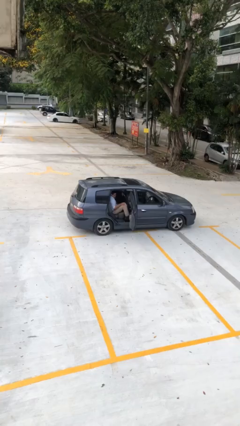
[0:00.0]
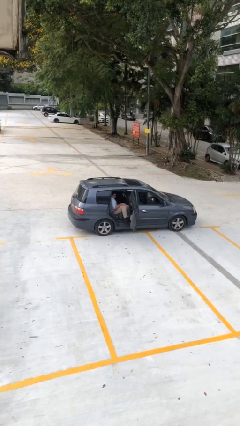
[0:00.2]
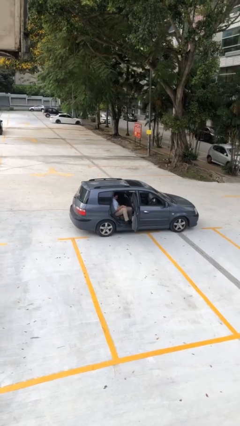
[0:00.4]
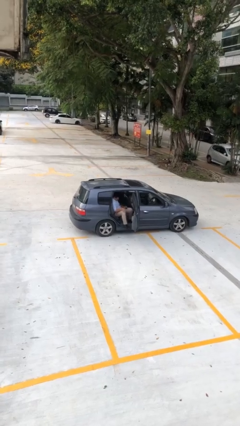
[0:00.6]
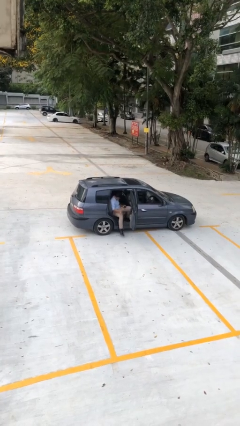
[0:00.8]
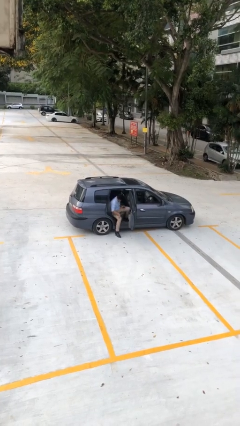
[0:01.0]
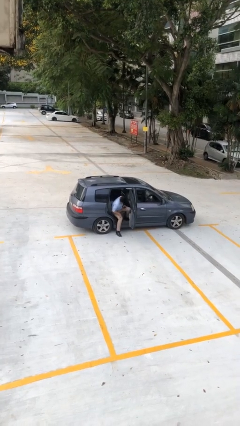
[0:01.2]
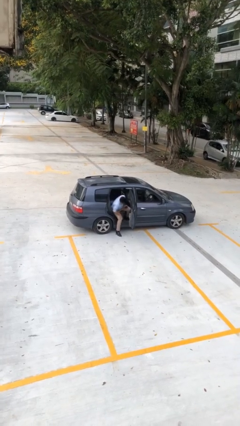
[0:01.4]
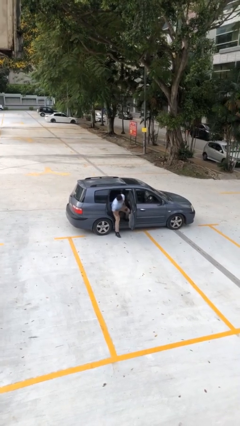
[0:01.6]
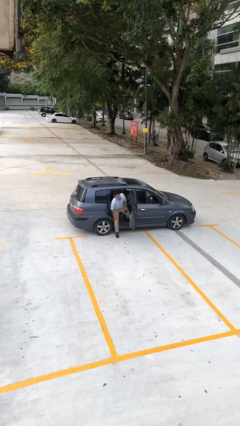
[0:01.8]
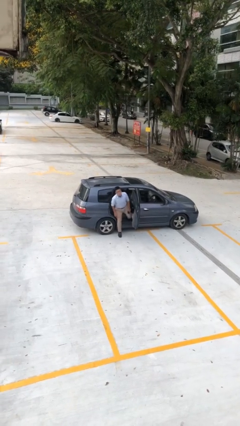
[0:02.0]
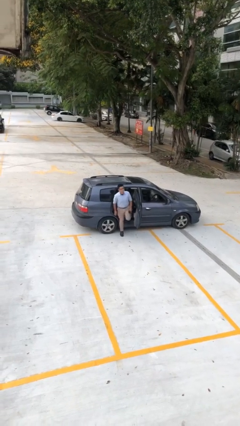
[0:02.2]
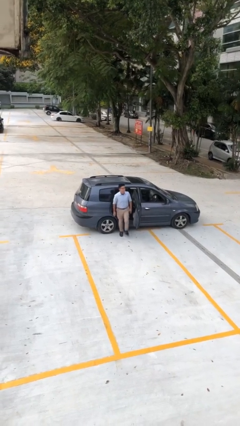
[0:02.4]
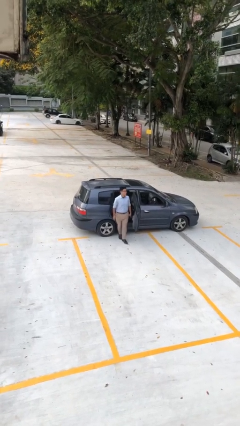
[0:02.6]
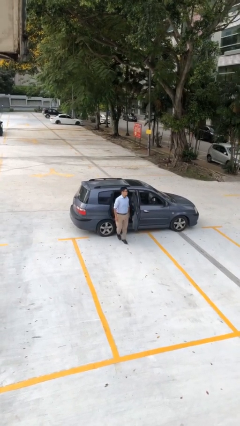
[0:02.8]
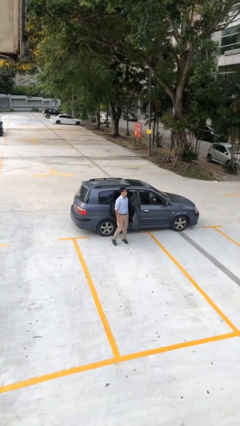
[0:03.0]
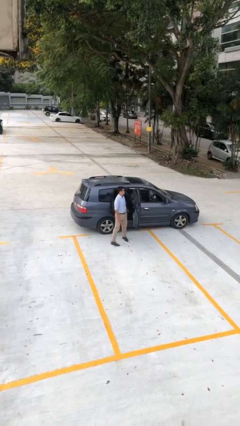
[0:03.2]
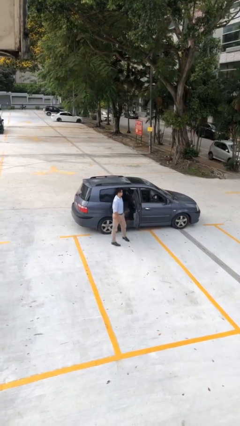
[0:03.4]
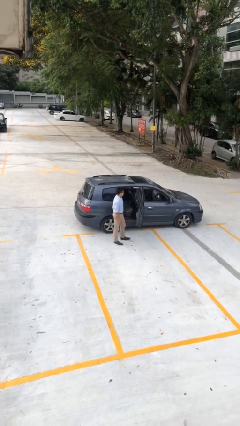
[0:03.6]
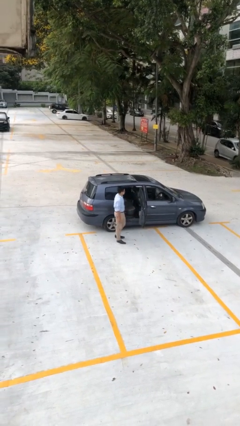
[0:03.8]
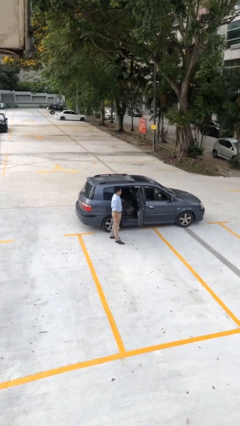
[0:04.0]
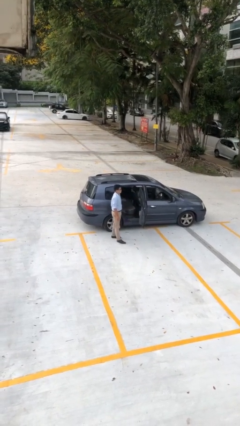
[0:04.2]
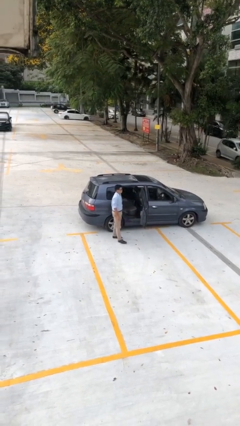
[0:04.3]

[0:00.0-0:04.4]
person exits car

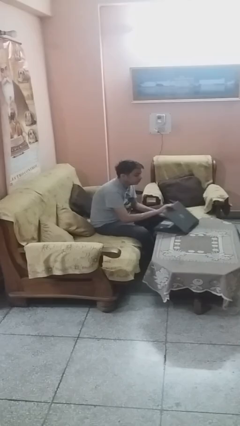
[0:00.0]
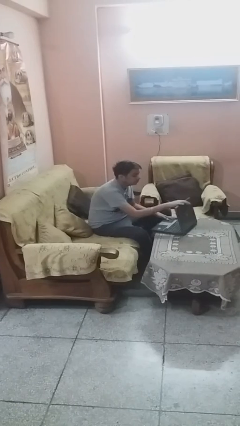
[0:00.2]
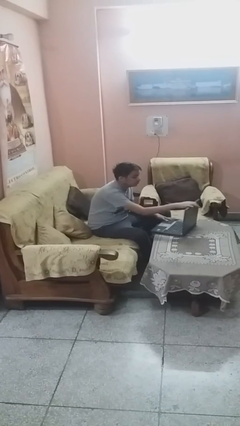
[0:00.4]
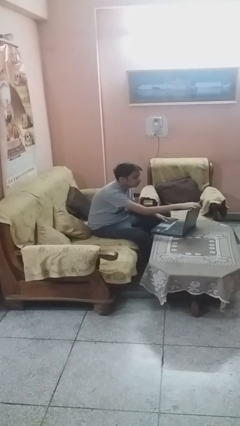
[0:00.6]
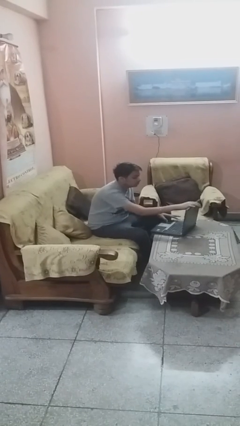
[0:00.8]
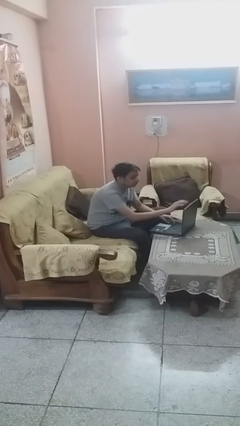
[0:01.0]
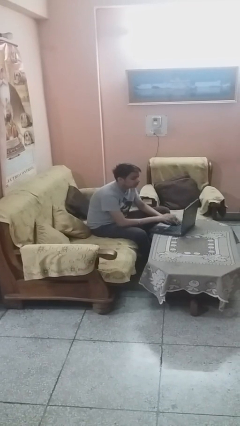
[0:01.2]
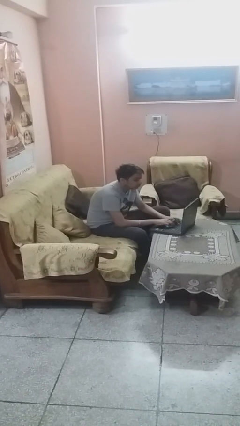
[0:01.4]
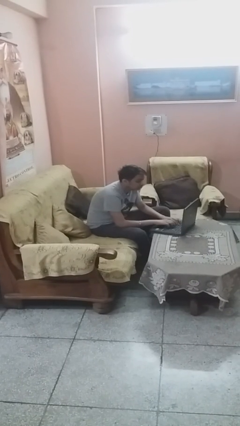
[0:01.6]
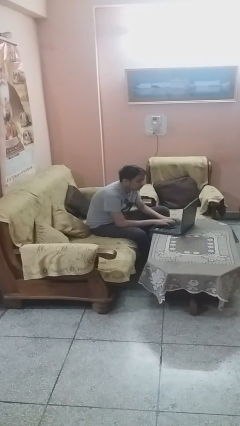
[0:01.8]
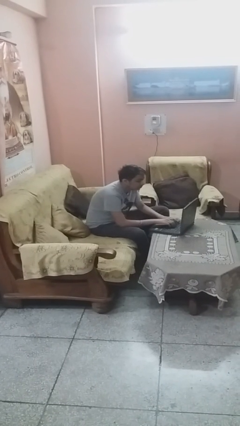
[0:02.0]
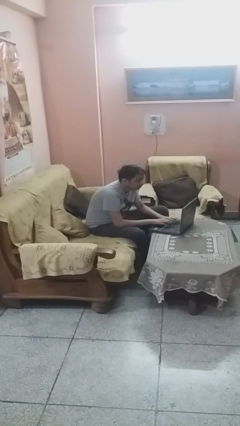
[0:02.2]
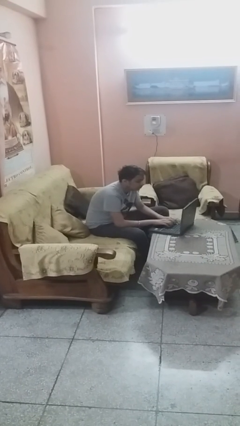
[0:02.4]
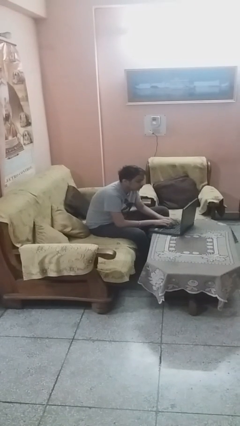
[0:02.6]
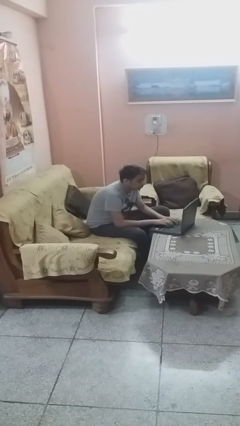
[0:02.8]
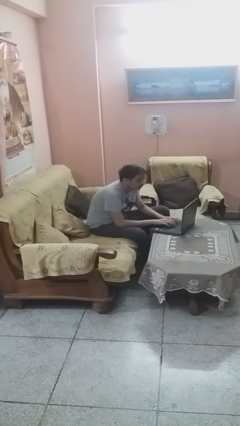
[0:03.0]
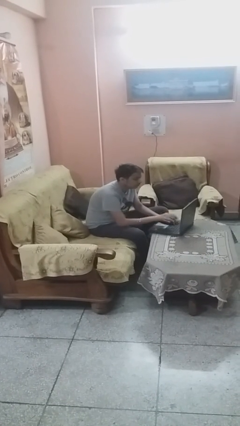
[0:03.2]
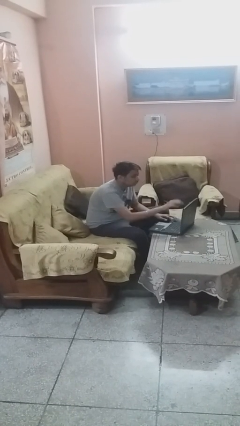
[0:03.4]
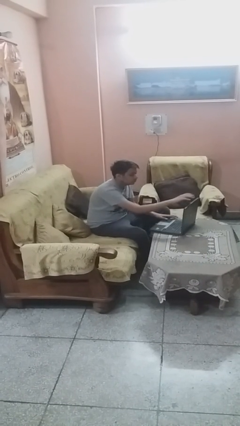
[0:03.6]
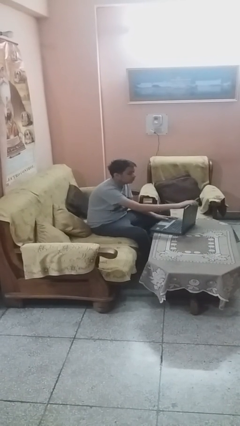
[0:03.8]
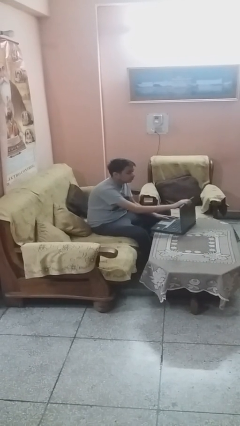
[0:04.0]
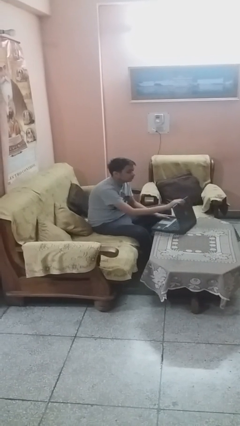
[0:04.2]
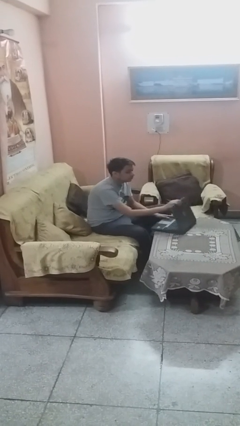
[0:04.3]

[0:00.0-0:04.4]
person interacts with laptop

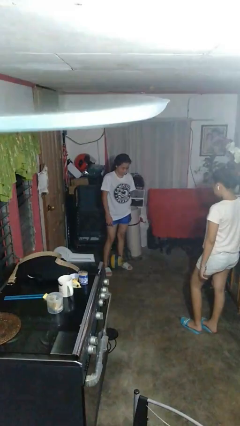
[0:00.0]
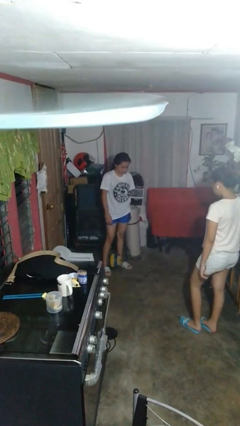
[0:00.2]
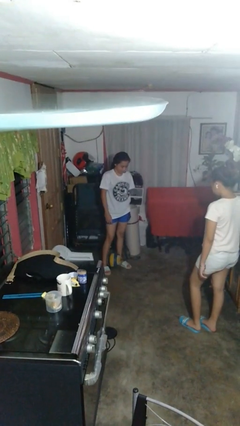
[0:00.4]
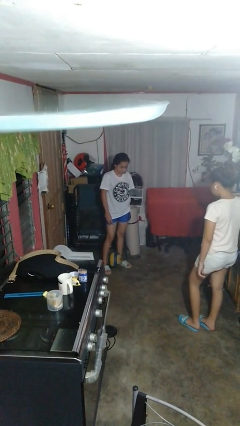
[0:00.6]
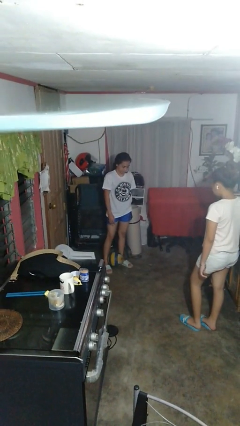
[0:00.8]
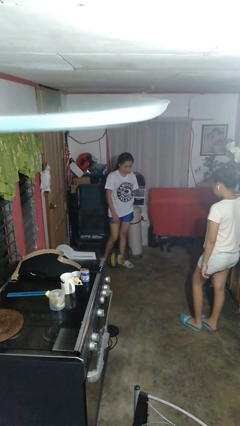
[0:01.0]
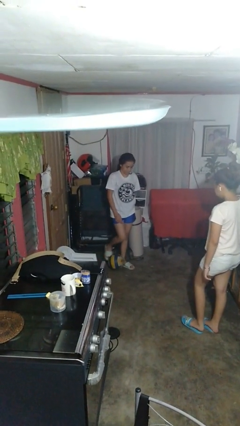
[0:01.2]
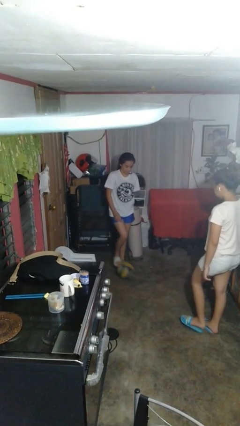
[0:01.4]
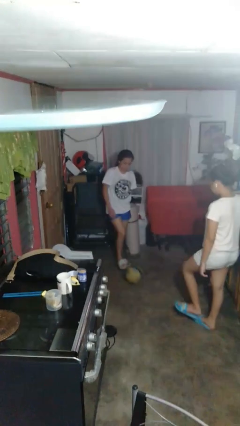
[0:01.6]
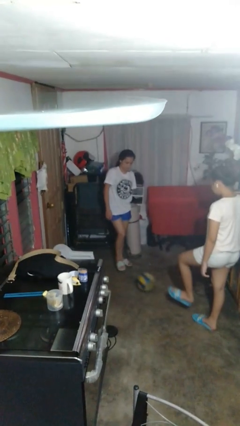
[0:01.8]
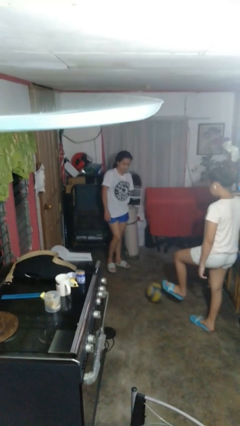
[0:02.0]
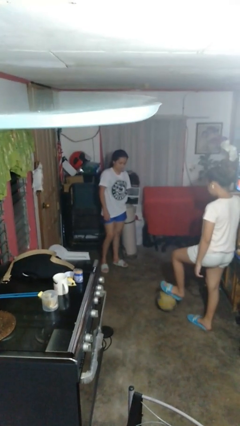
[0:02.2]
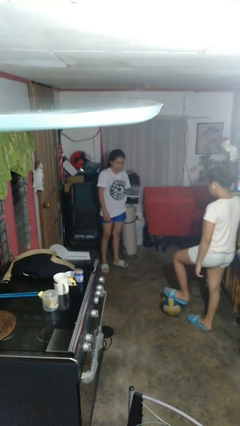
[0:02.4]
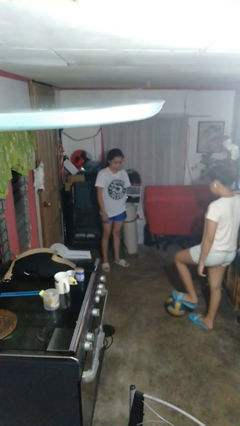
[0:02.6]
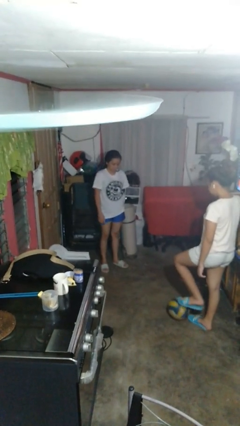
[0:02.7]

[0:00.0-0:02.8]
person kicks object to person

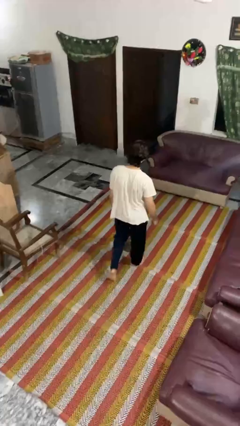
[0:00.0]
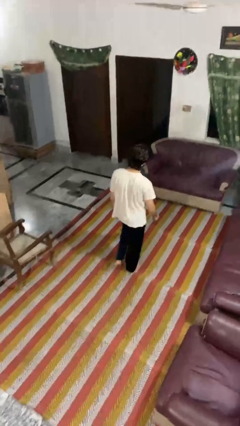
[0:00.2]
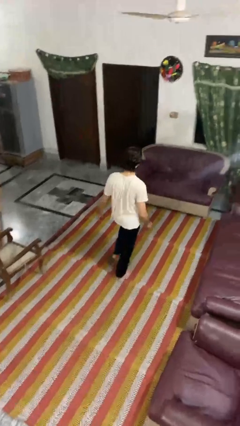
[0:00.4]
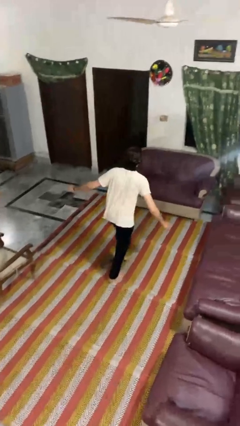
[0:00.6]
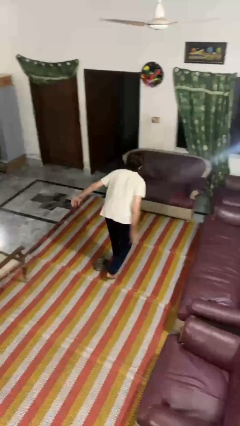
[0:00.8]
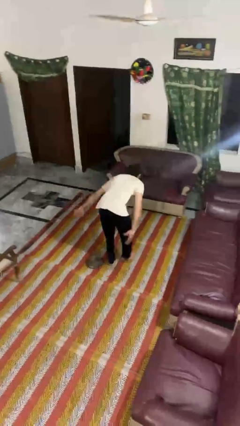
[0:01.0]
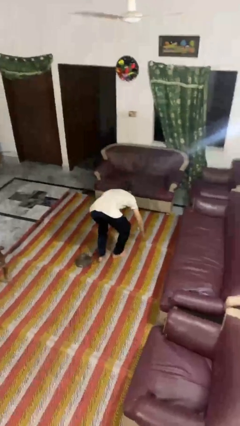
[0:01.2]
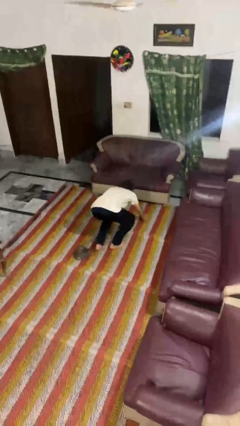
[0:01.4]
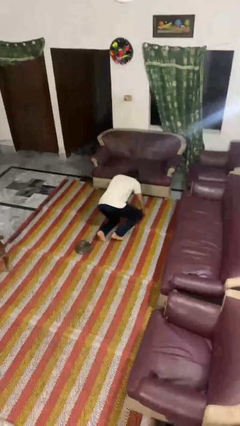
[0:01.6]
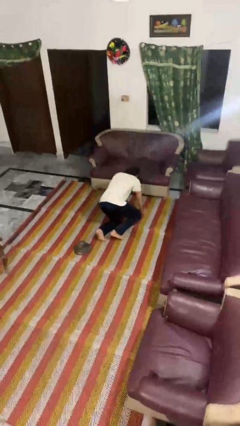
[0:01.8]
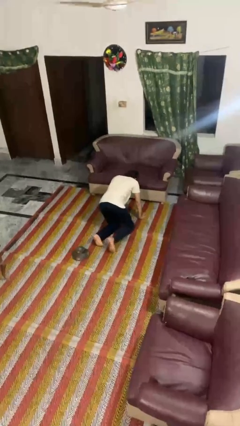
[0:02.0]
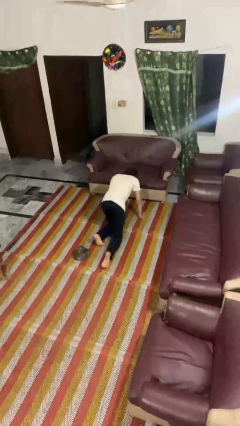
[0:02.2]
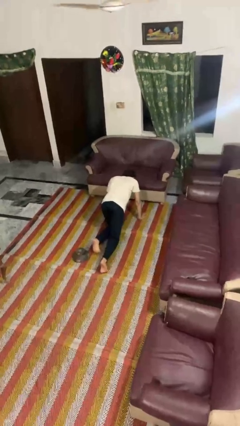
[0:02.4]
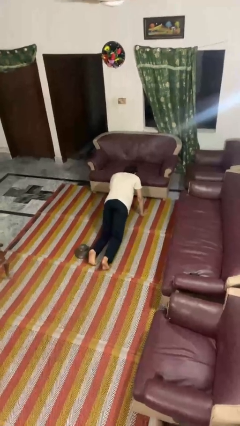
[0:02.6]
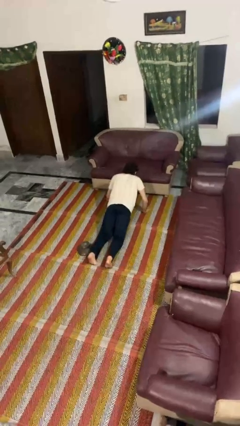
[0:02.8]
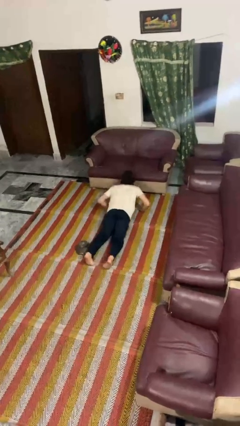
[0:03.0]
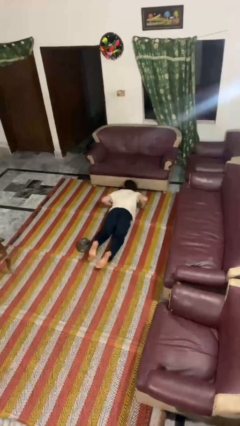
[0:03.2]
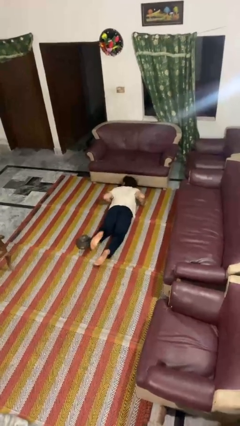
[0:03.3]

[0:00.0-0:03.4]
person trips on object on floor

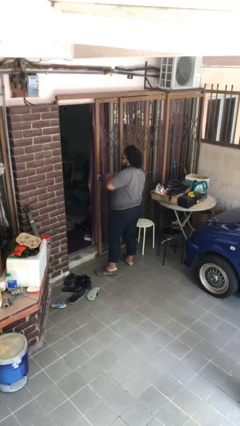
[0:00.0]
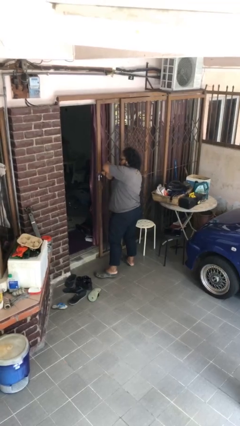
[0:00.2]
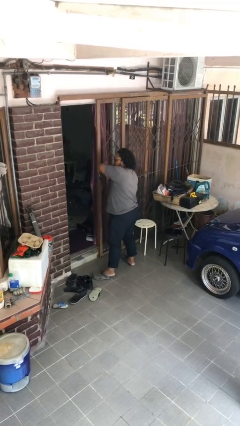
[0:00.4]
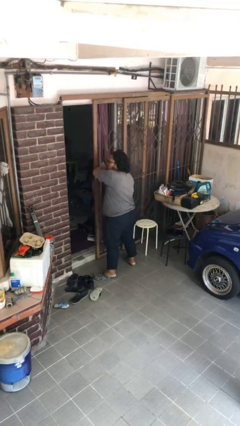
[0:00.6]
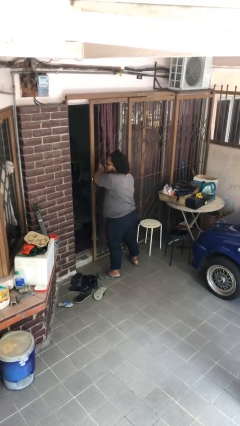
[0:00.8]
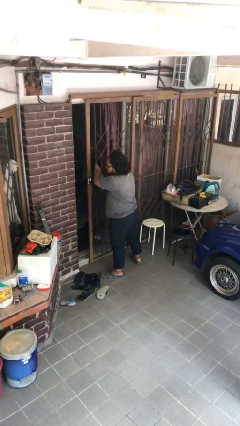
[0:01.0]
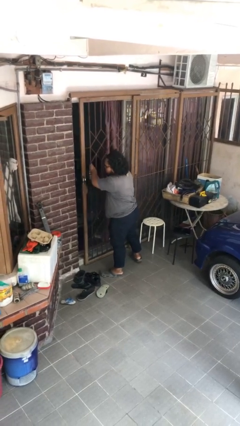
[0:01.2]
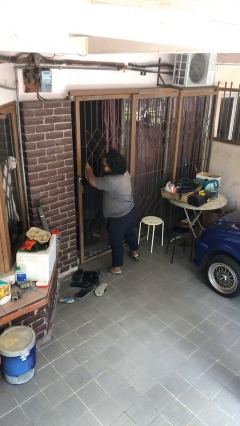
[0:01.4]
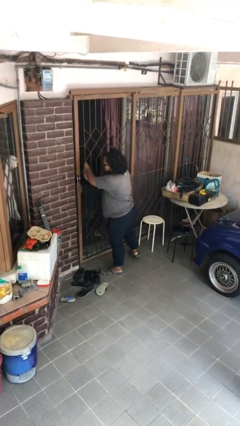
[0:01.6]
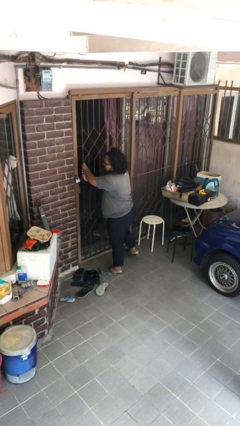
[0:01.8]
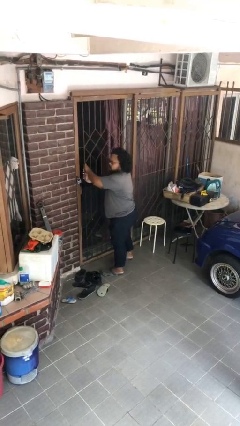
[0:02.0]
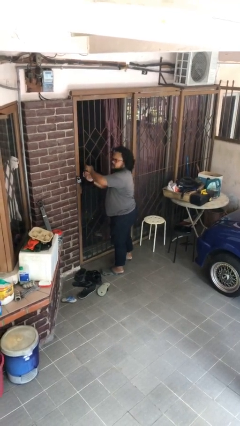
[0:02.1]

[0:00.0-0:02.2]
person closes facility door
